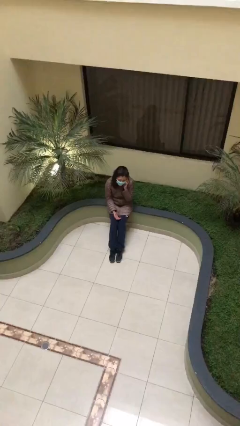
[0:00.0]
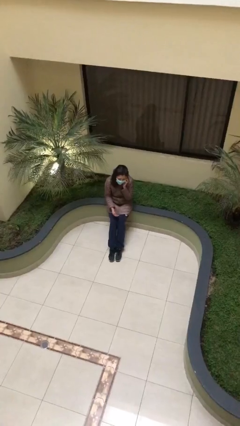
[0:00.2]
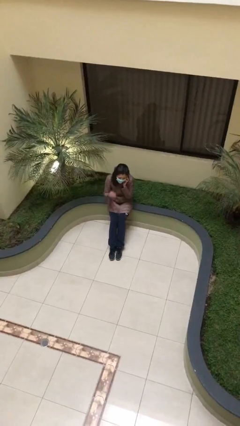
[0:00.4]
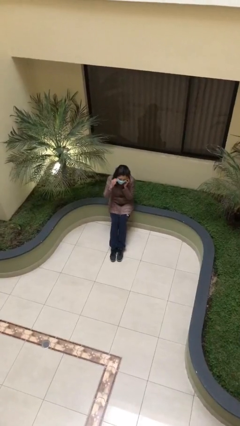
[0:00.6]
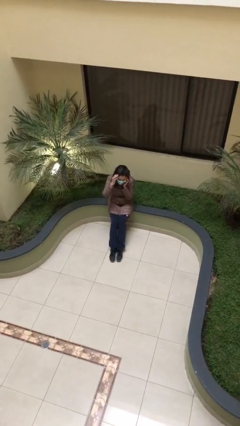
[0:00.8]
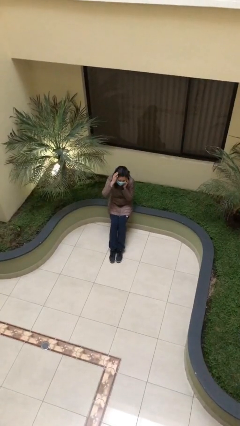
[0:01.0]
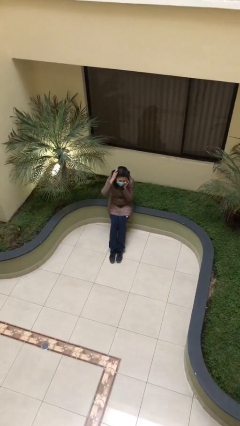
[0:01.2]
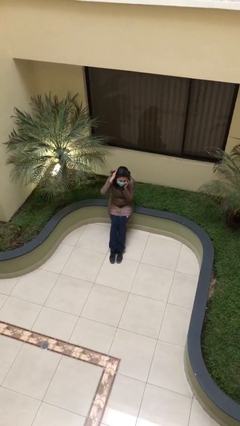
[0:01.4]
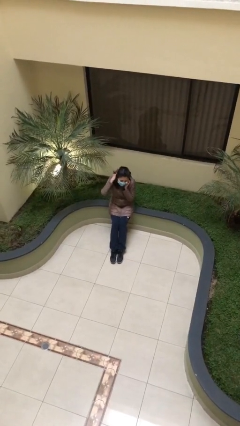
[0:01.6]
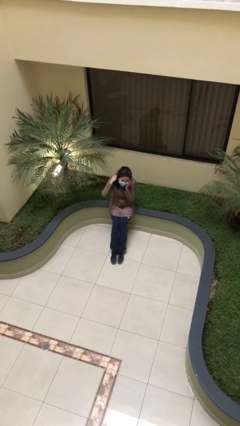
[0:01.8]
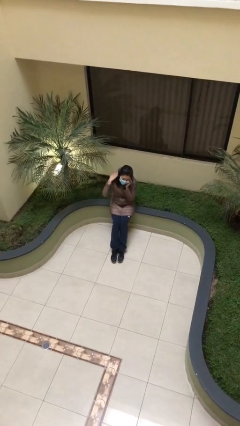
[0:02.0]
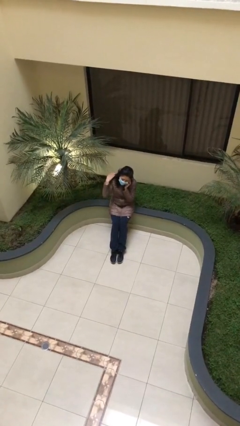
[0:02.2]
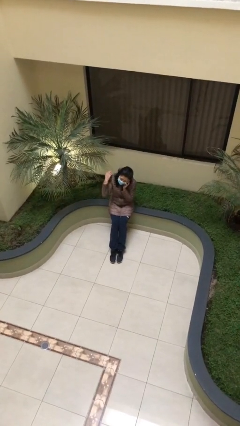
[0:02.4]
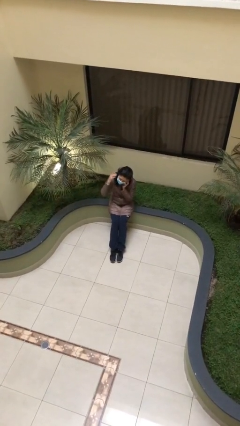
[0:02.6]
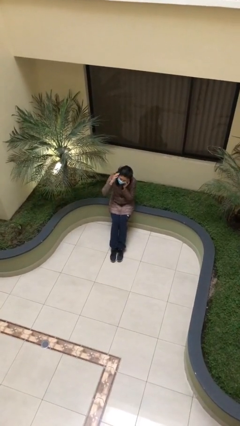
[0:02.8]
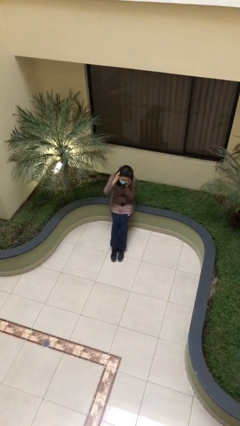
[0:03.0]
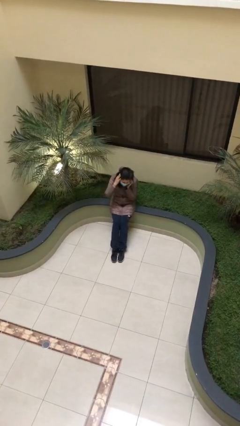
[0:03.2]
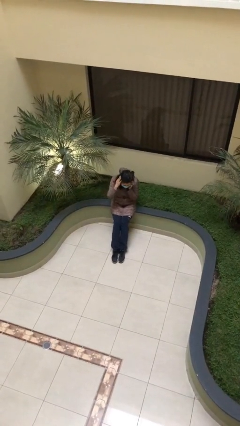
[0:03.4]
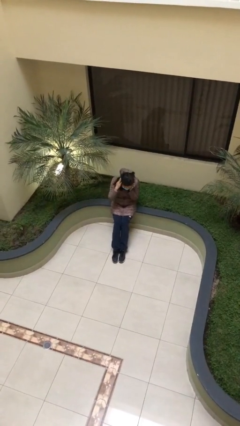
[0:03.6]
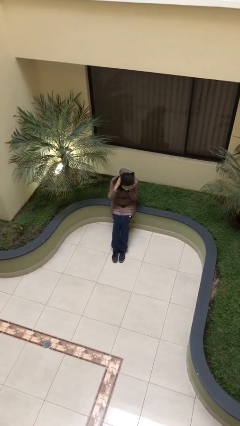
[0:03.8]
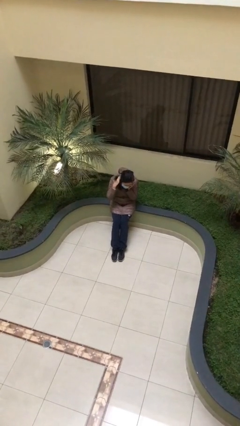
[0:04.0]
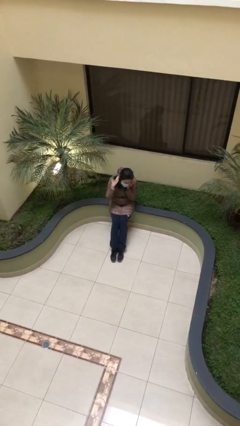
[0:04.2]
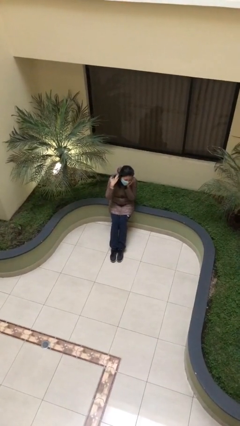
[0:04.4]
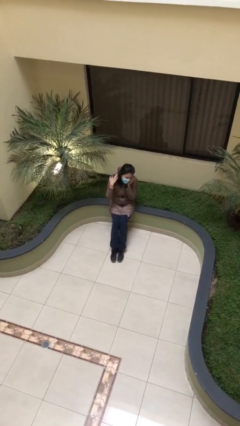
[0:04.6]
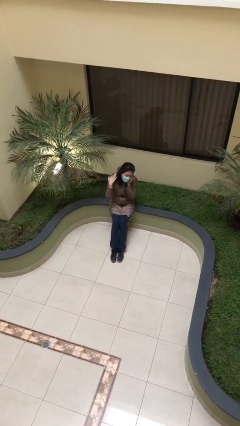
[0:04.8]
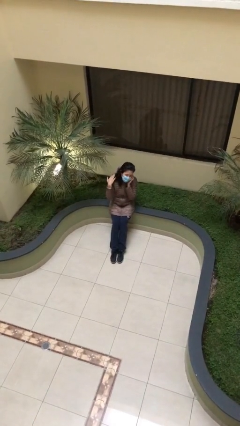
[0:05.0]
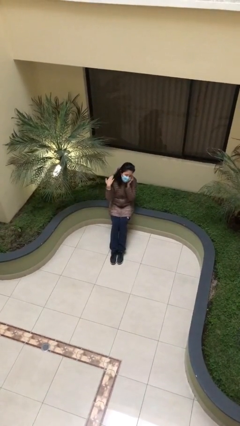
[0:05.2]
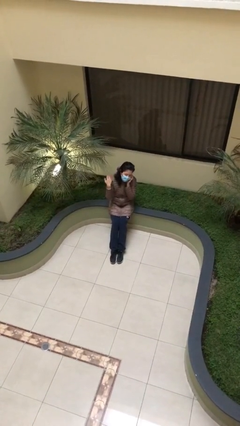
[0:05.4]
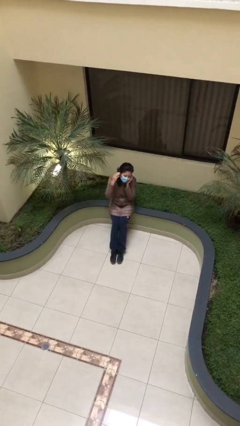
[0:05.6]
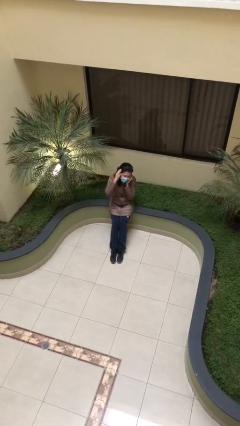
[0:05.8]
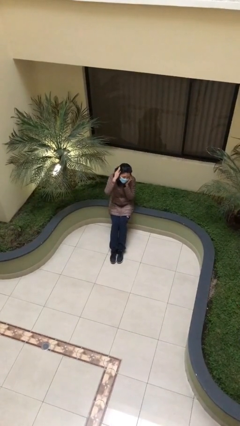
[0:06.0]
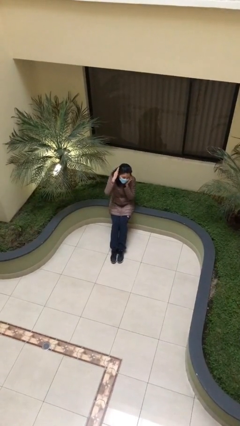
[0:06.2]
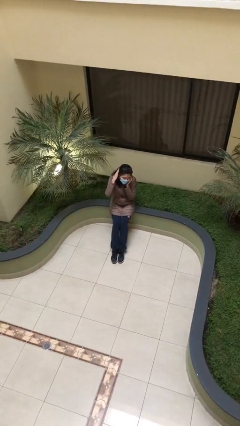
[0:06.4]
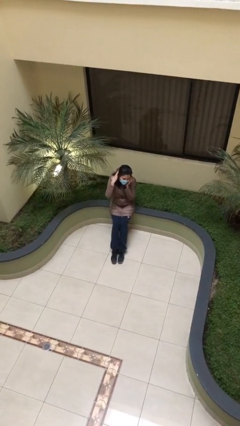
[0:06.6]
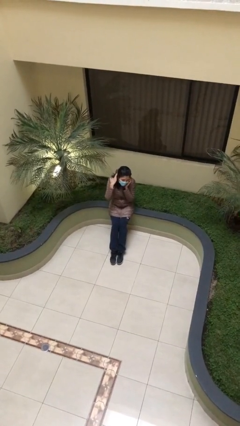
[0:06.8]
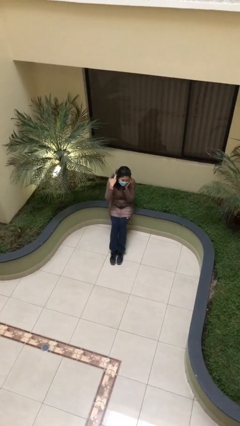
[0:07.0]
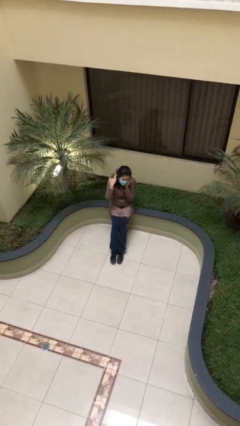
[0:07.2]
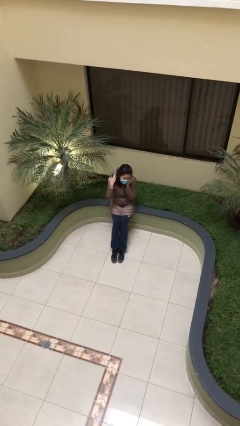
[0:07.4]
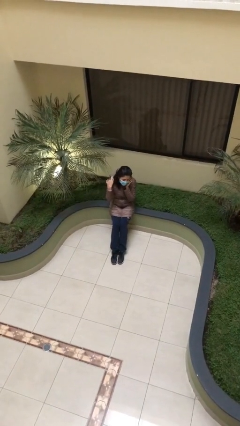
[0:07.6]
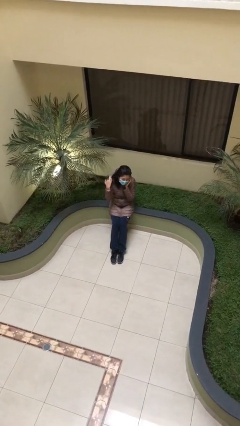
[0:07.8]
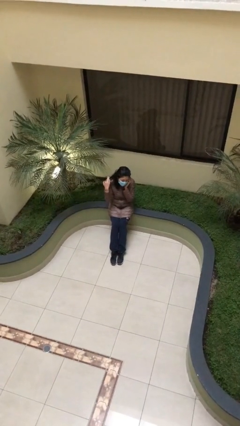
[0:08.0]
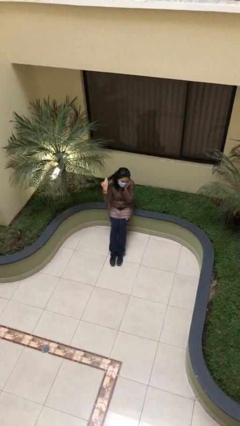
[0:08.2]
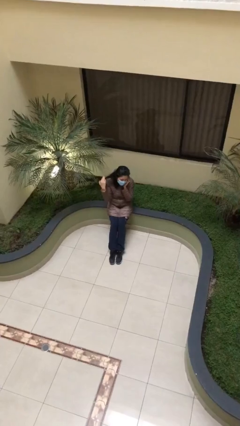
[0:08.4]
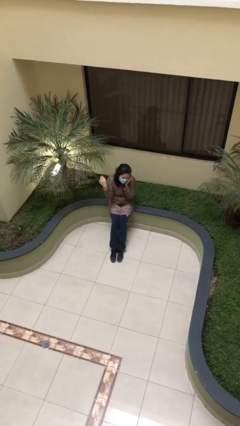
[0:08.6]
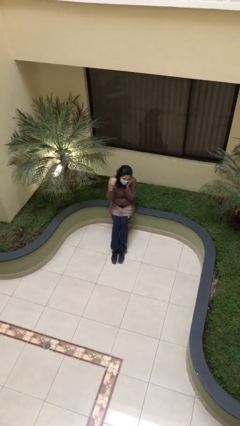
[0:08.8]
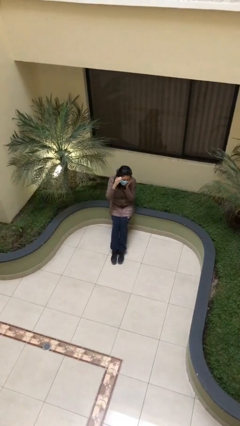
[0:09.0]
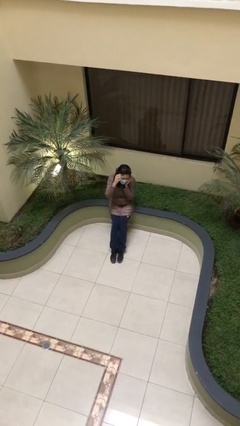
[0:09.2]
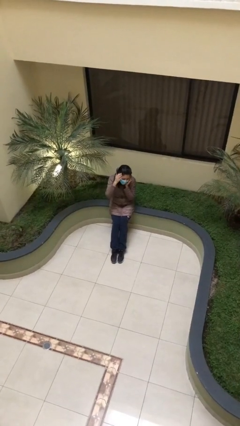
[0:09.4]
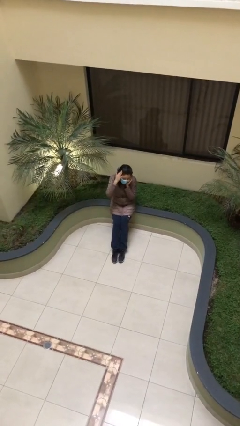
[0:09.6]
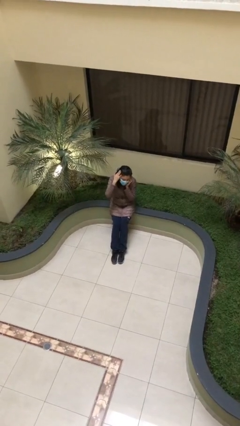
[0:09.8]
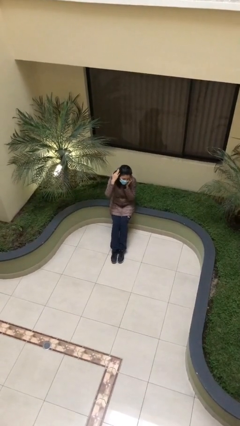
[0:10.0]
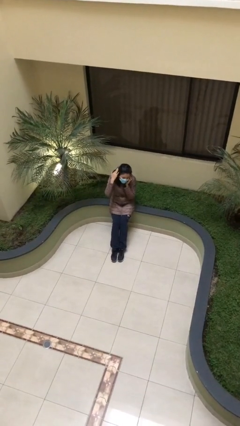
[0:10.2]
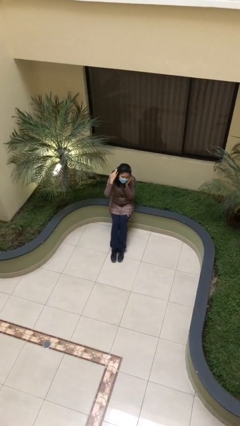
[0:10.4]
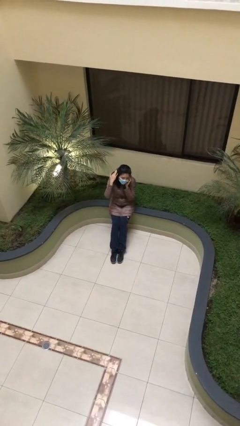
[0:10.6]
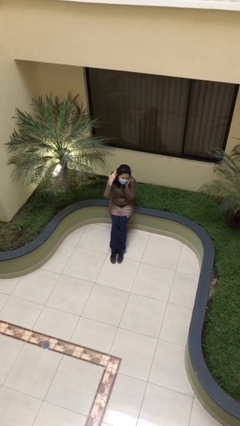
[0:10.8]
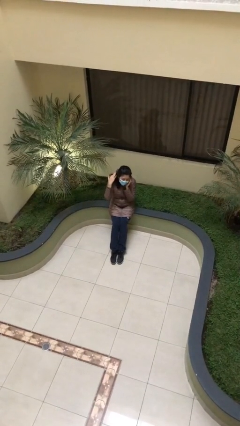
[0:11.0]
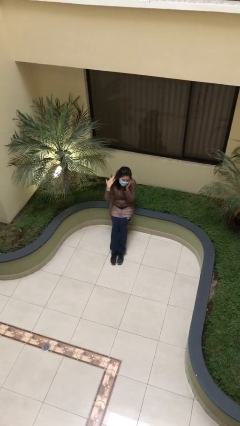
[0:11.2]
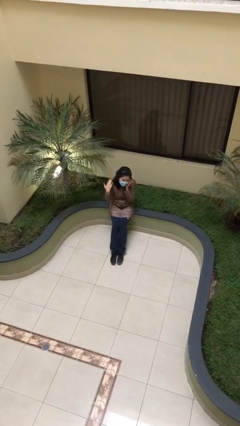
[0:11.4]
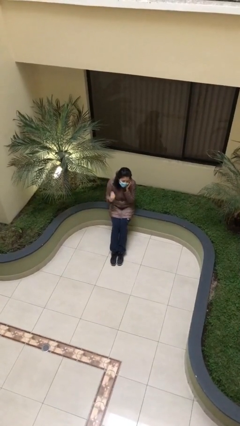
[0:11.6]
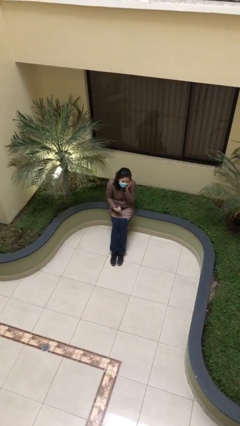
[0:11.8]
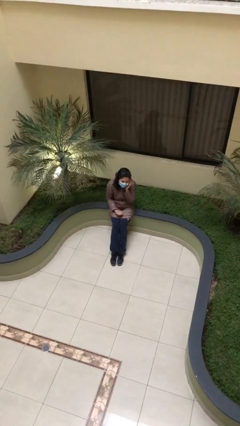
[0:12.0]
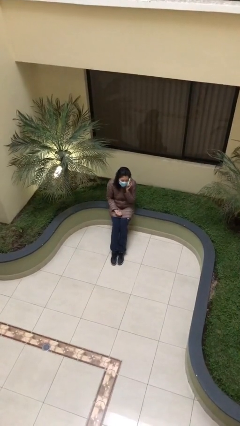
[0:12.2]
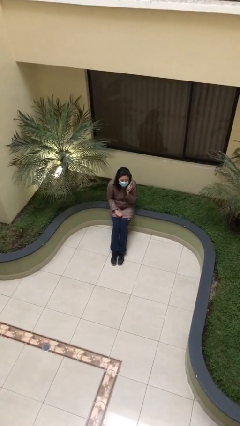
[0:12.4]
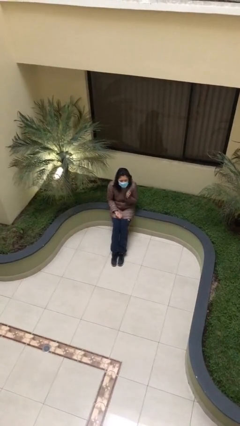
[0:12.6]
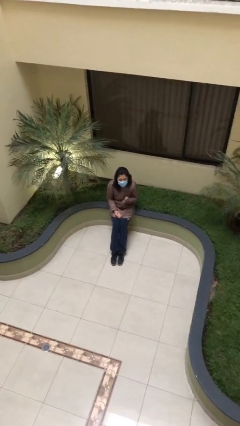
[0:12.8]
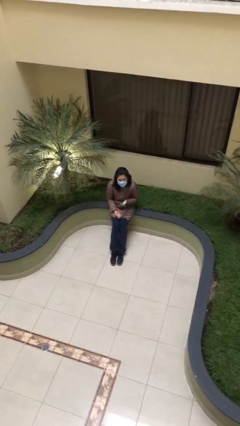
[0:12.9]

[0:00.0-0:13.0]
person talks on phone

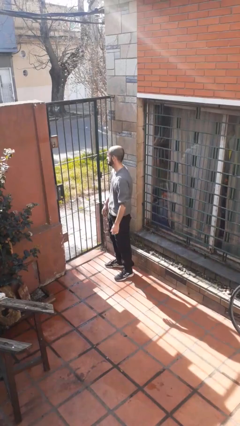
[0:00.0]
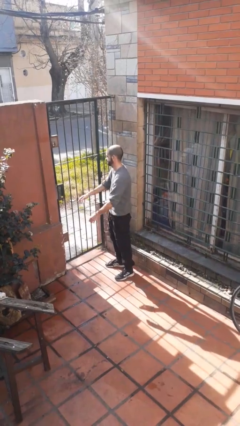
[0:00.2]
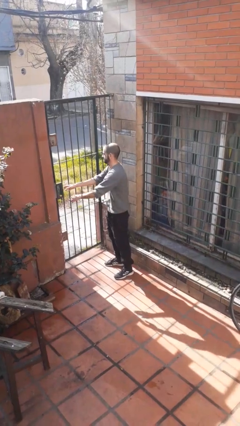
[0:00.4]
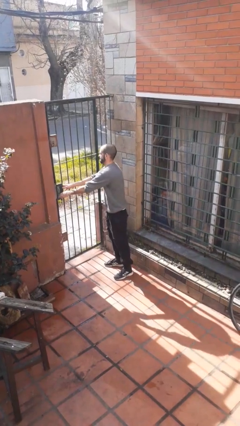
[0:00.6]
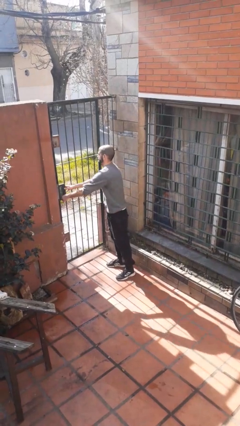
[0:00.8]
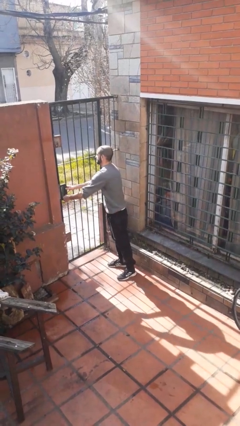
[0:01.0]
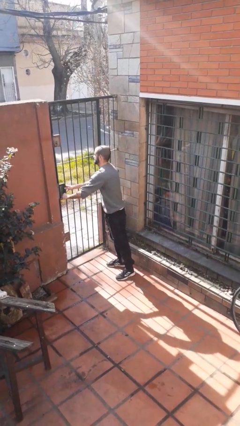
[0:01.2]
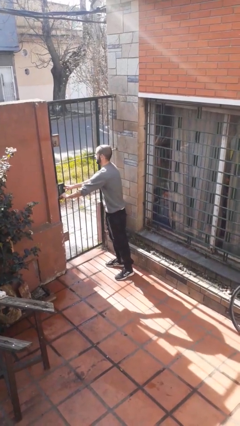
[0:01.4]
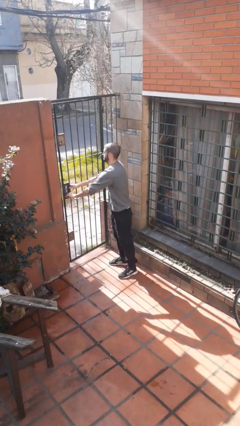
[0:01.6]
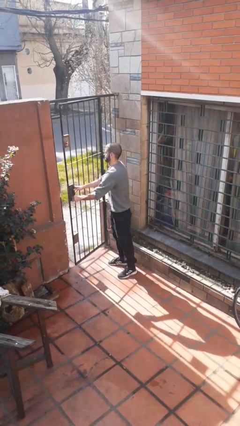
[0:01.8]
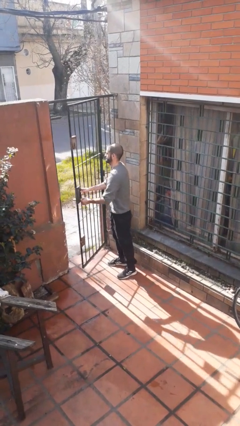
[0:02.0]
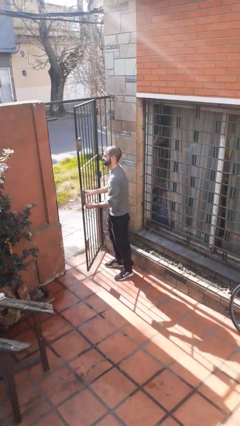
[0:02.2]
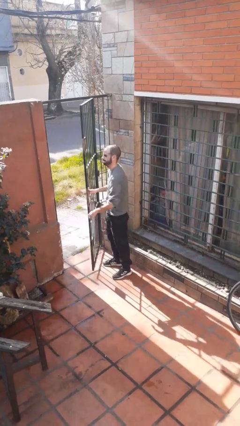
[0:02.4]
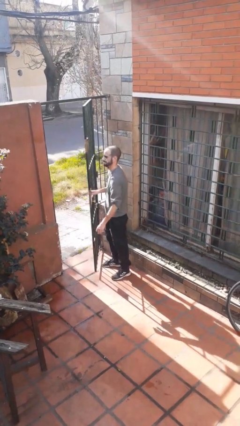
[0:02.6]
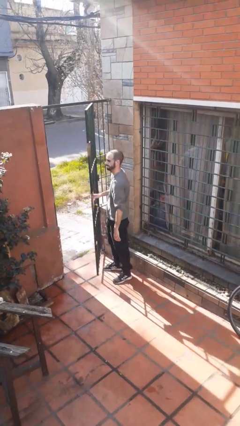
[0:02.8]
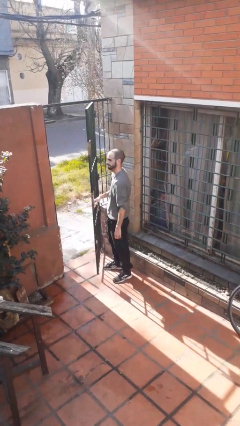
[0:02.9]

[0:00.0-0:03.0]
person opens gate

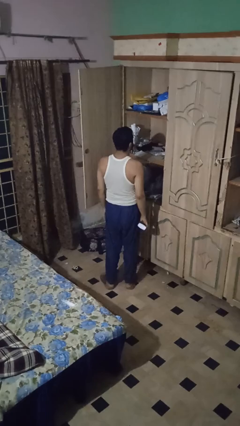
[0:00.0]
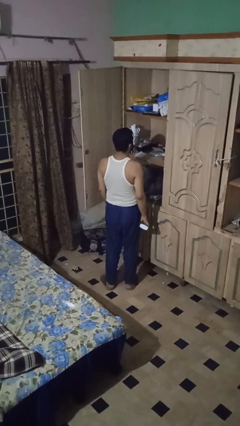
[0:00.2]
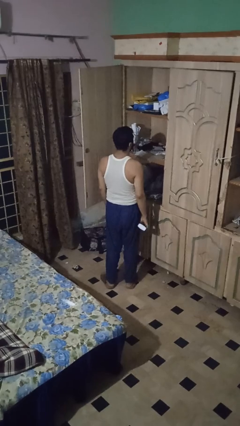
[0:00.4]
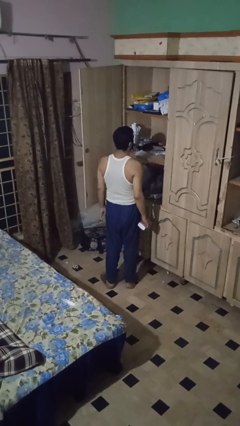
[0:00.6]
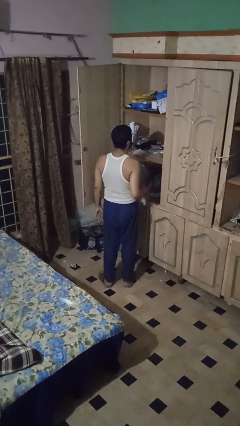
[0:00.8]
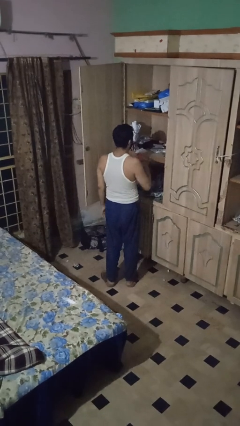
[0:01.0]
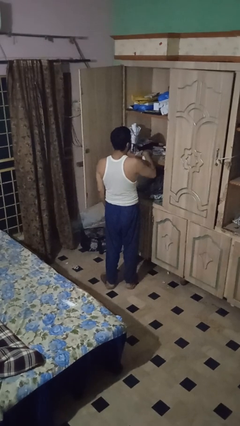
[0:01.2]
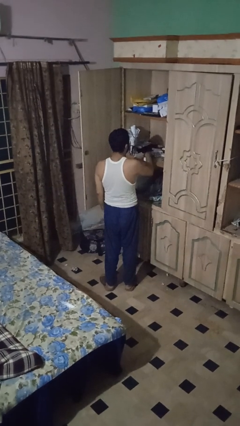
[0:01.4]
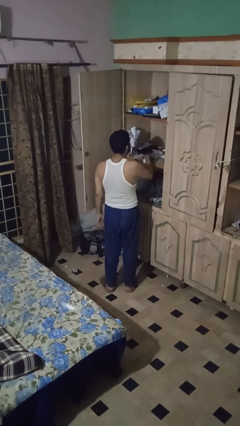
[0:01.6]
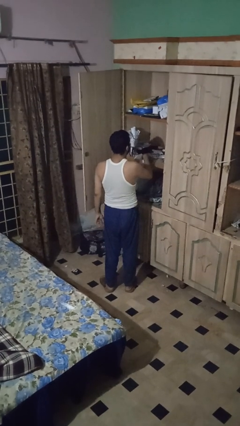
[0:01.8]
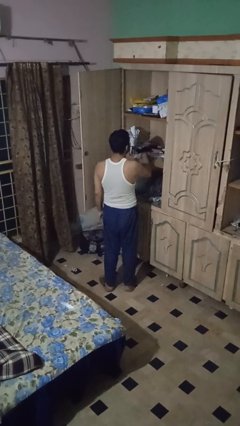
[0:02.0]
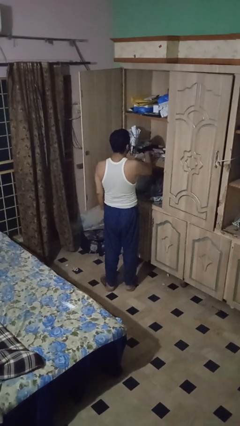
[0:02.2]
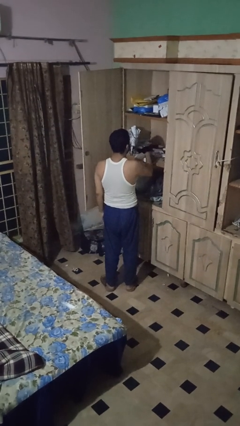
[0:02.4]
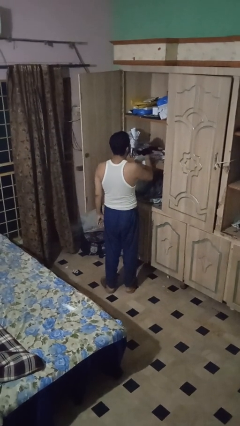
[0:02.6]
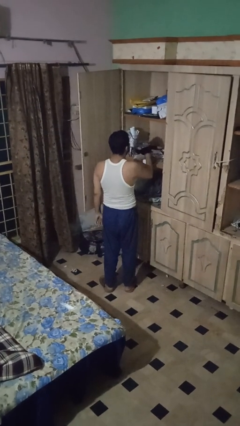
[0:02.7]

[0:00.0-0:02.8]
person dusts furniture
